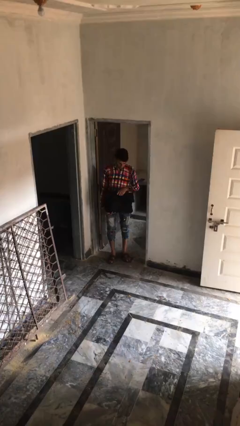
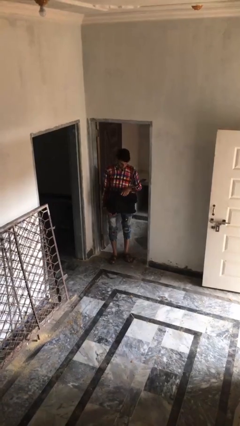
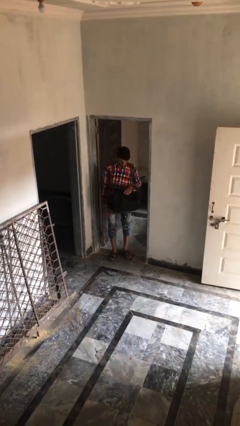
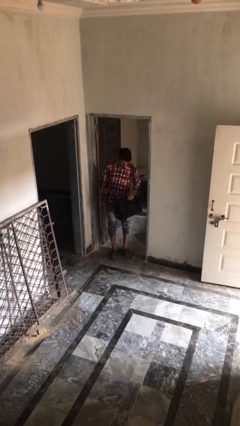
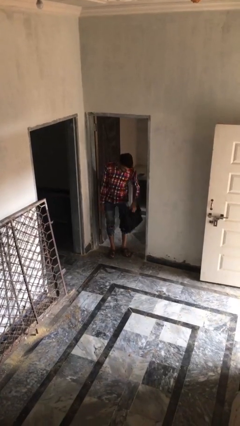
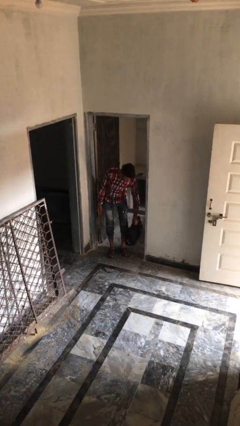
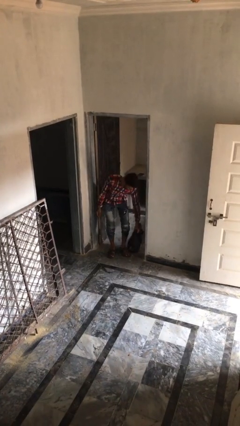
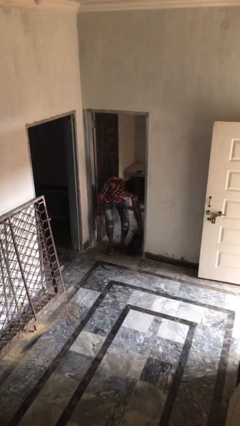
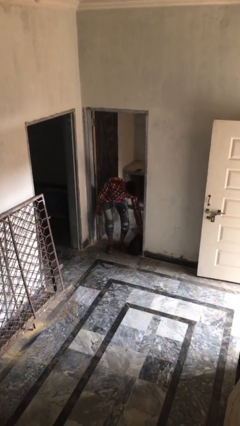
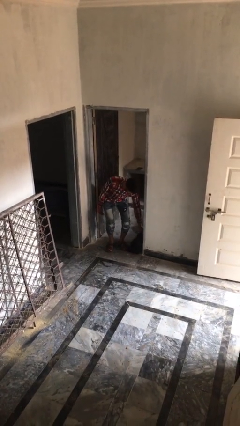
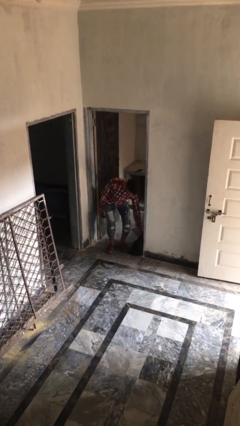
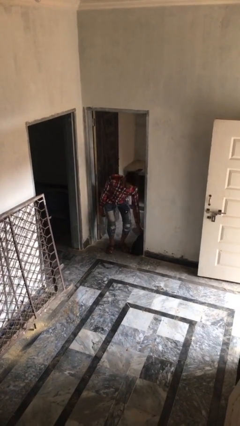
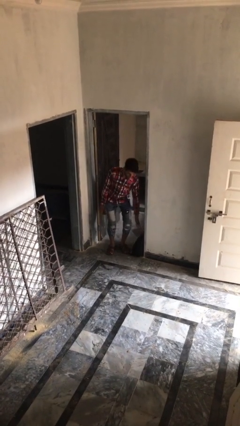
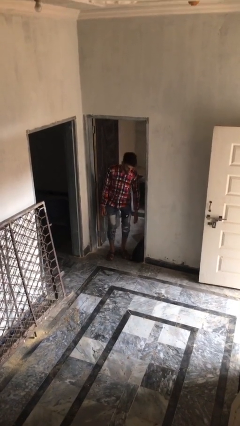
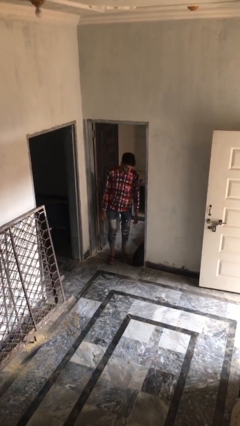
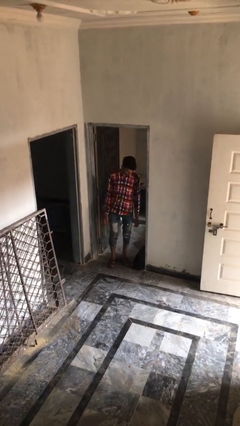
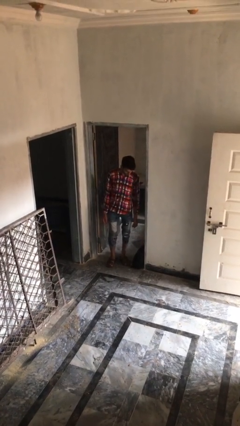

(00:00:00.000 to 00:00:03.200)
person puts down object on floor

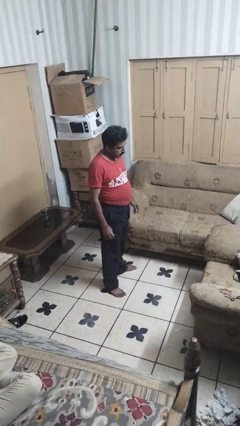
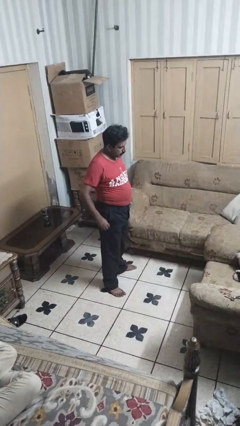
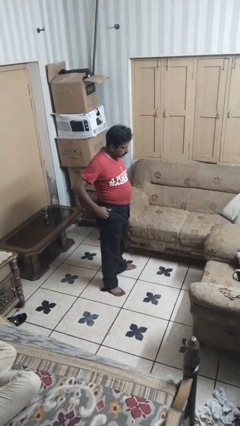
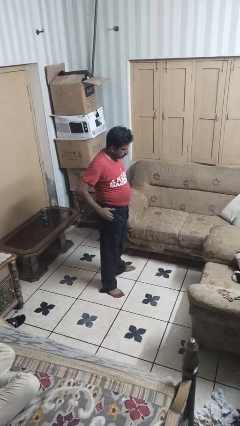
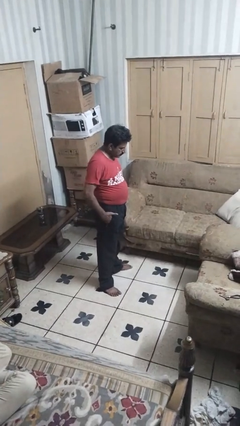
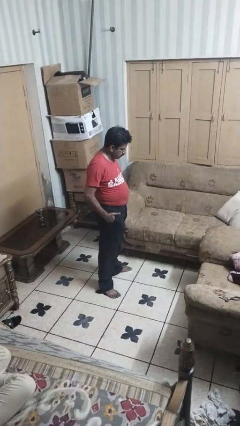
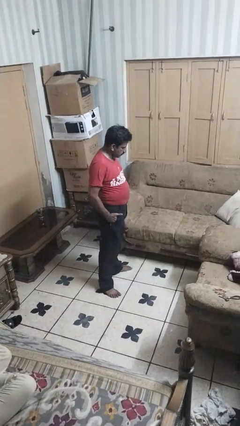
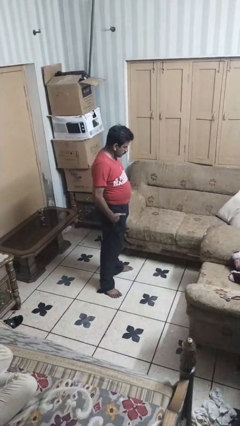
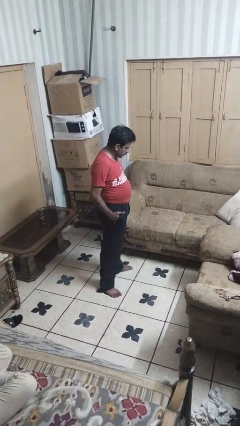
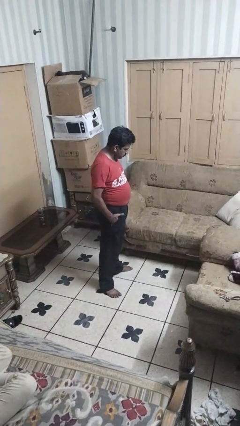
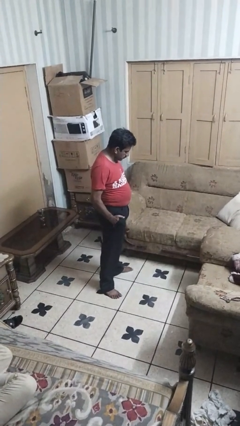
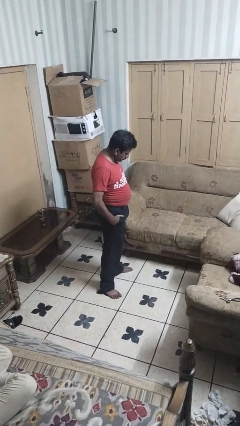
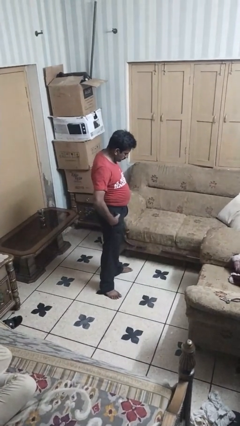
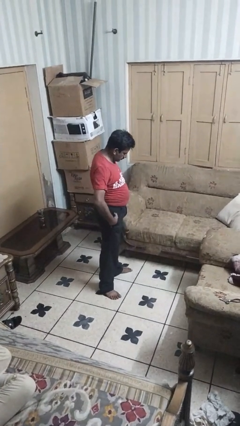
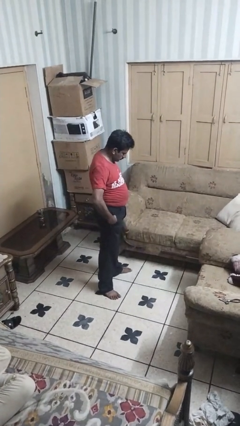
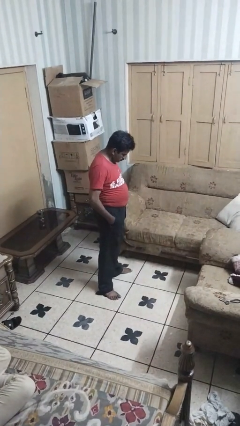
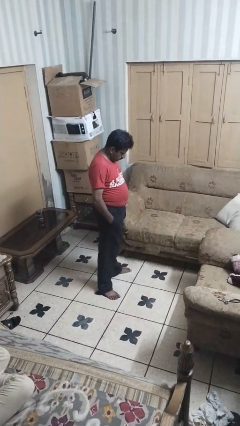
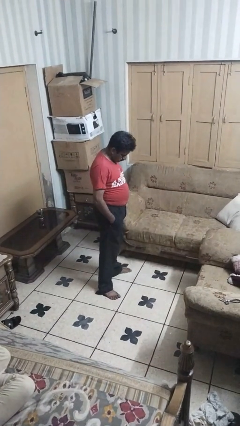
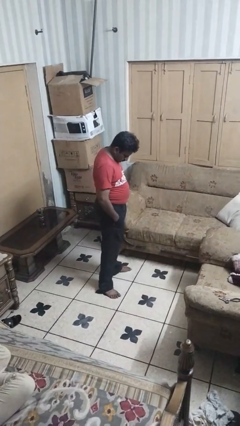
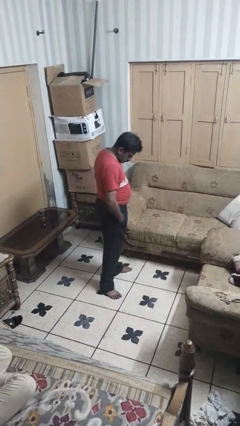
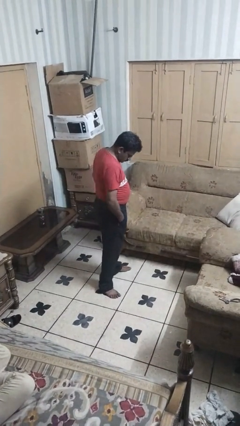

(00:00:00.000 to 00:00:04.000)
person puts hands in back pockets

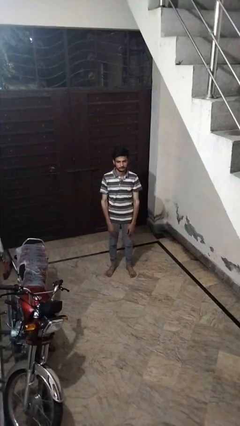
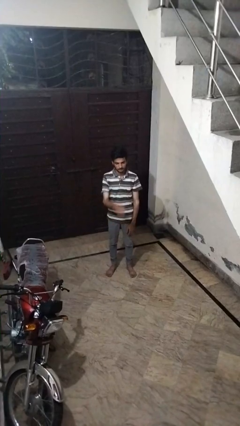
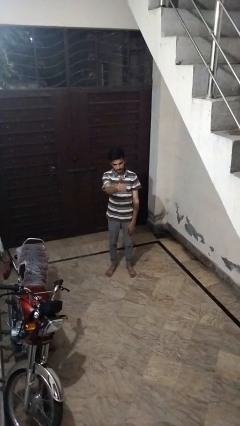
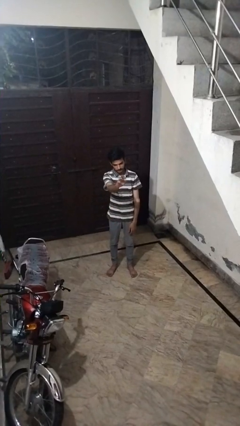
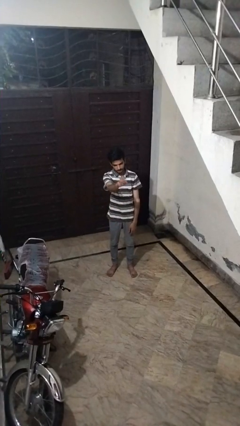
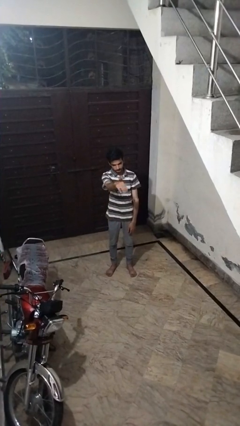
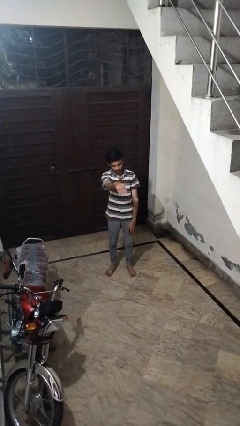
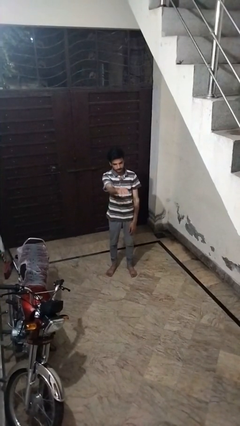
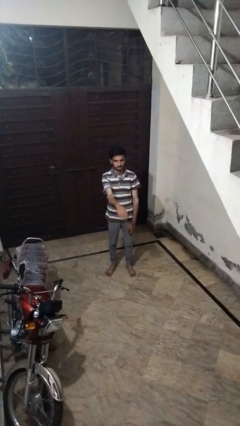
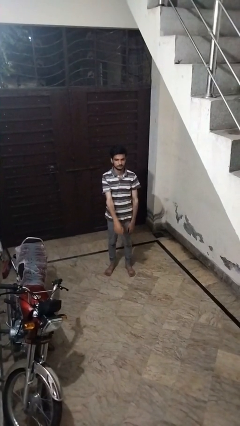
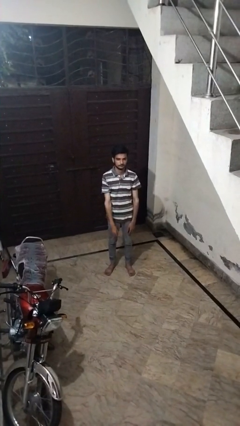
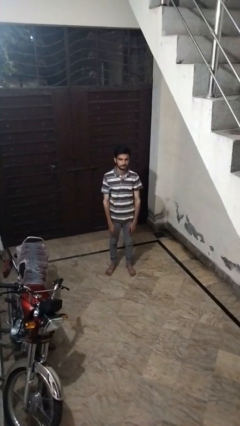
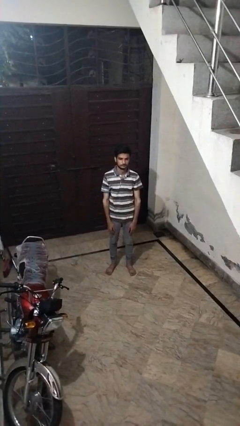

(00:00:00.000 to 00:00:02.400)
person gestures come here

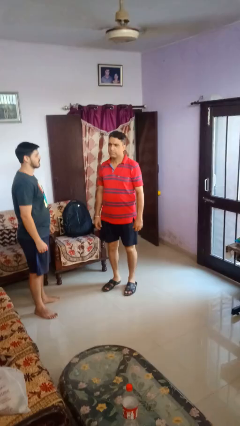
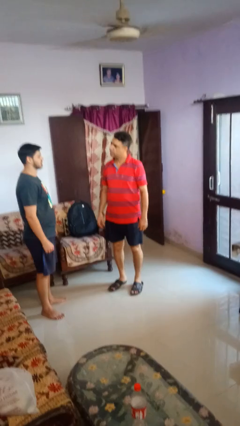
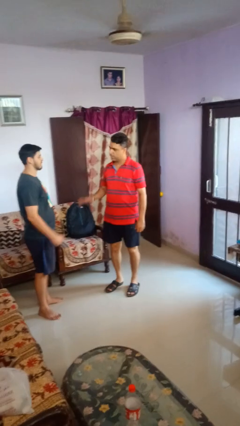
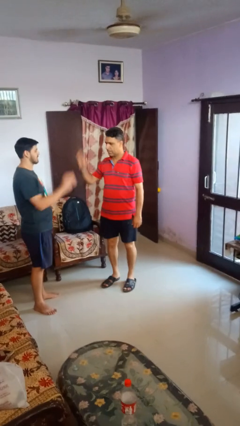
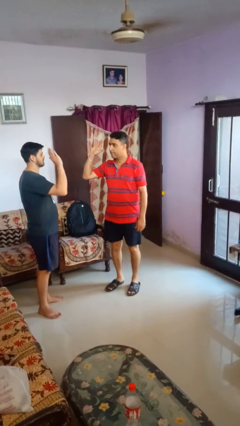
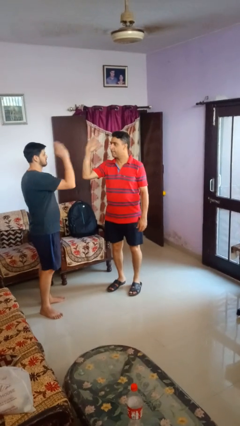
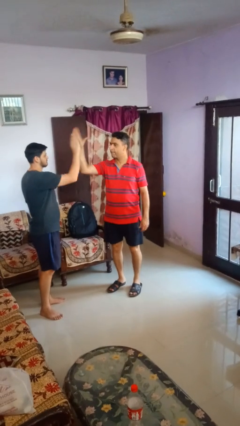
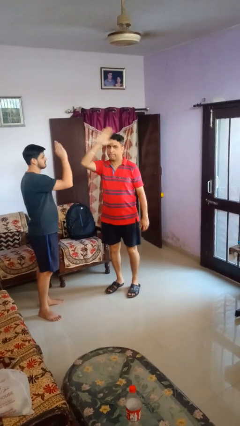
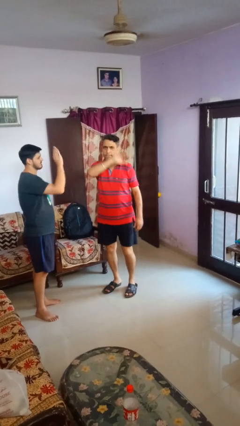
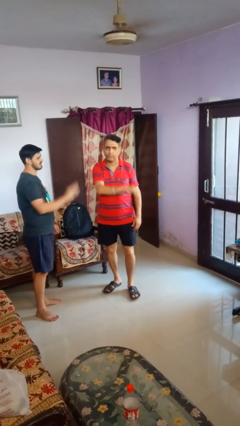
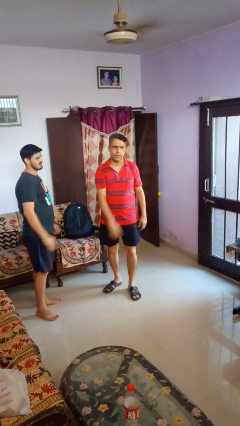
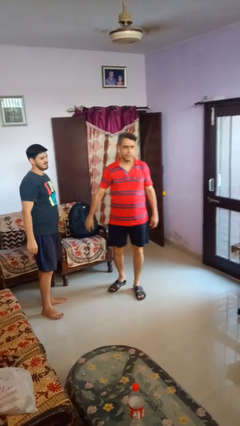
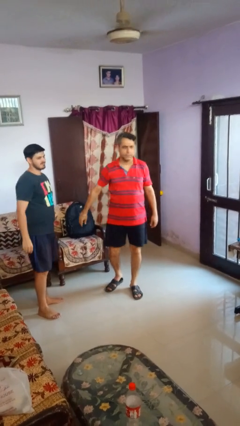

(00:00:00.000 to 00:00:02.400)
person highfives hand

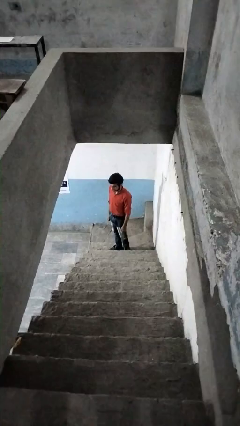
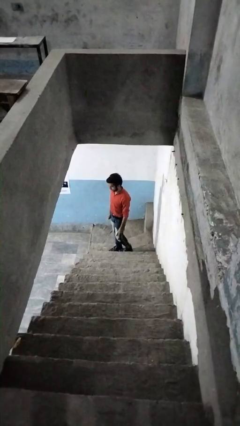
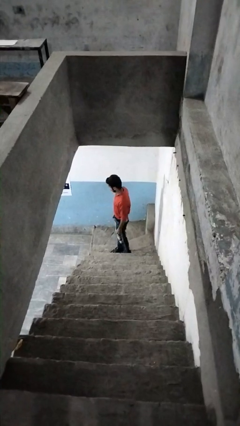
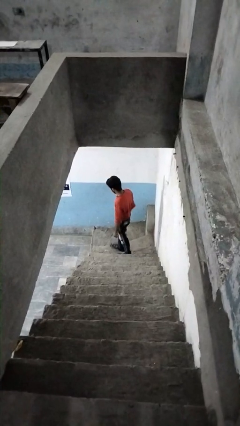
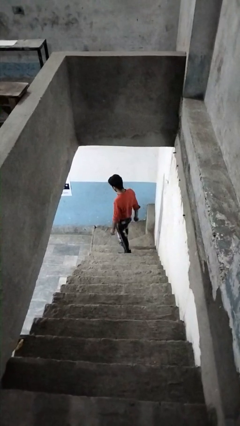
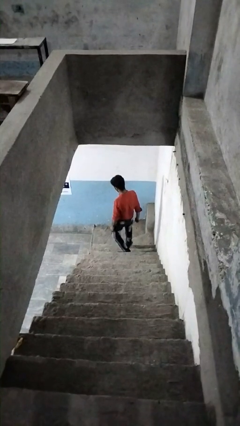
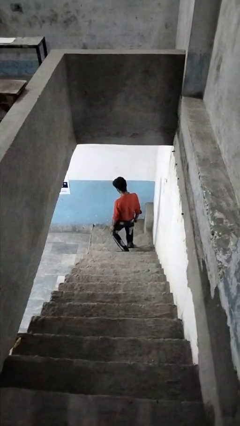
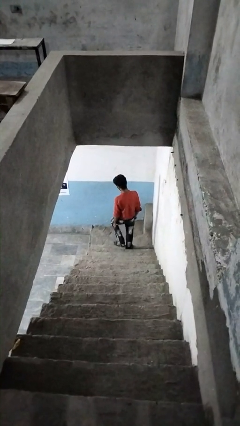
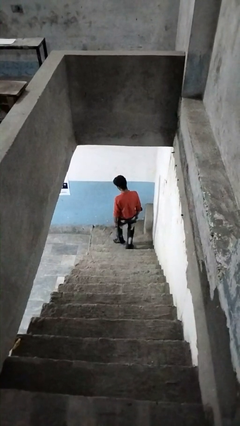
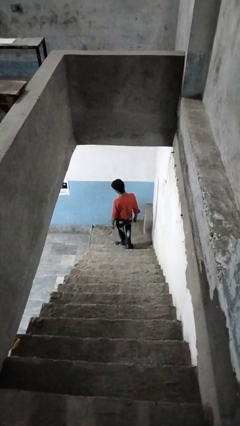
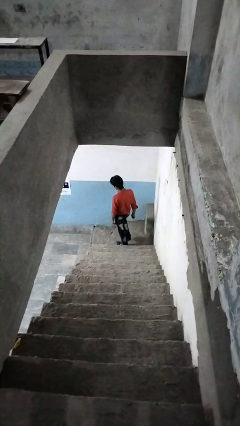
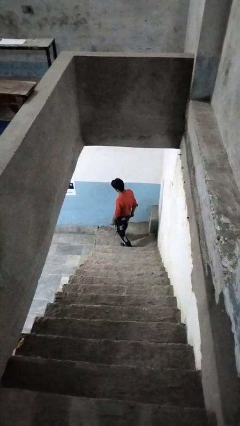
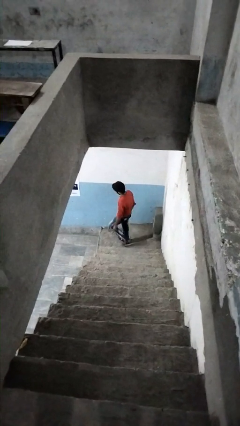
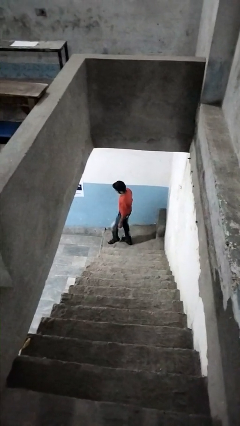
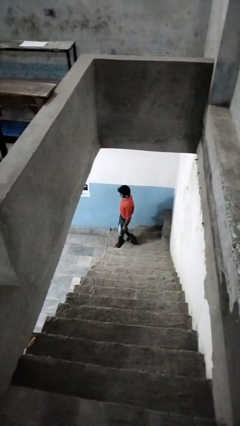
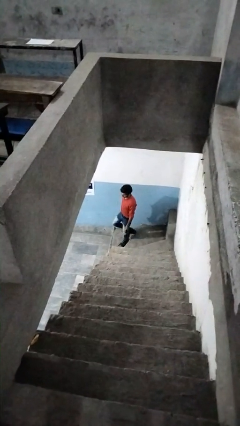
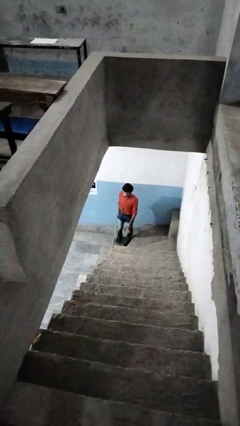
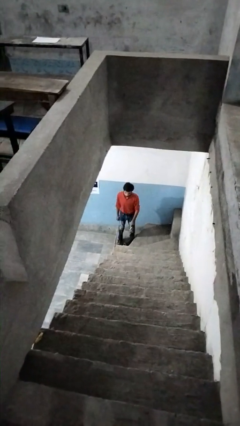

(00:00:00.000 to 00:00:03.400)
person climbs down stairs

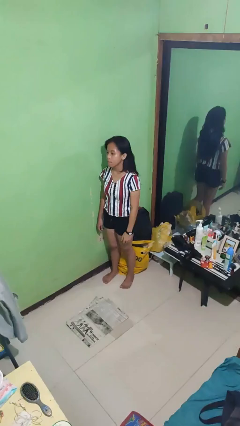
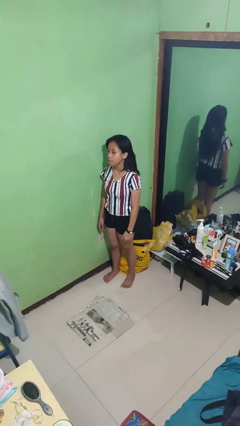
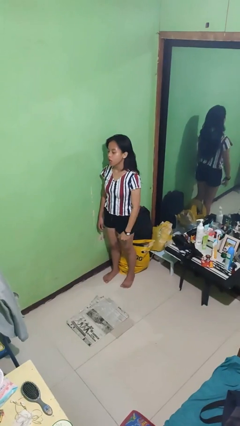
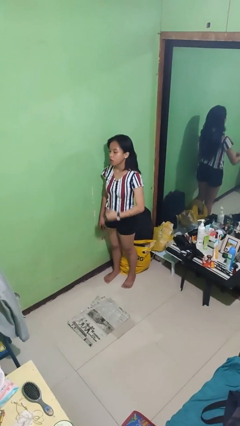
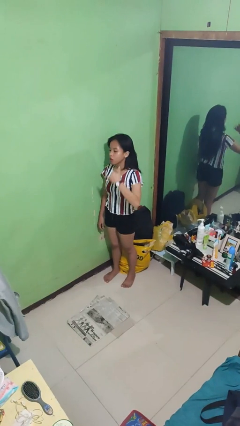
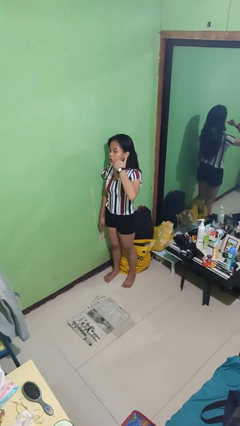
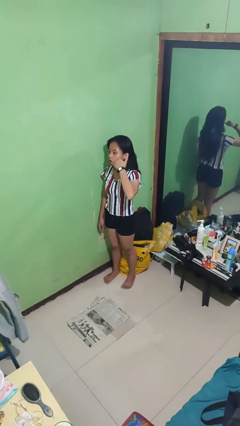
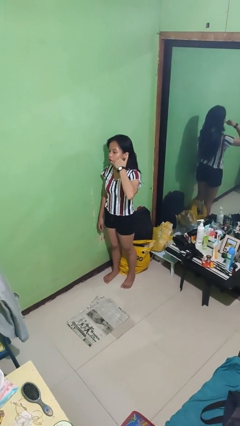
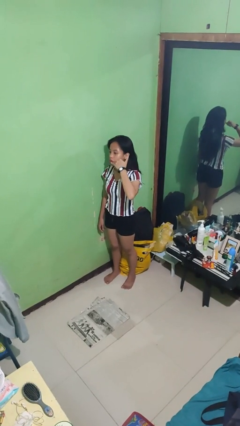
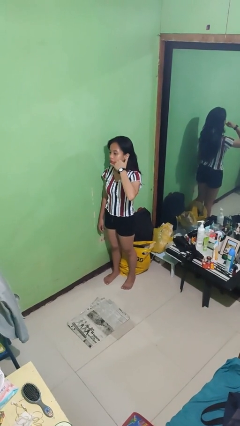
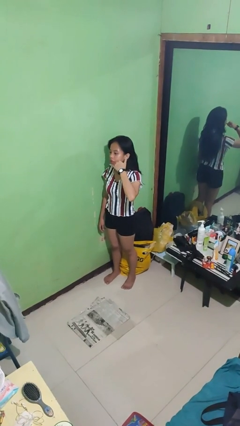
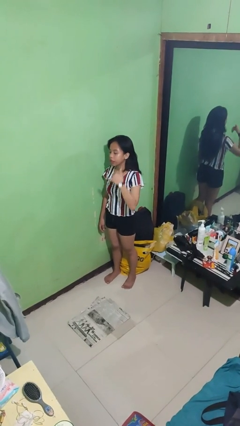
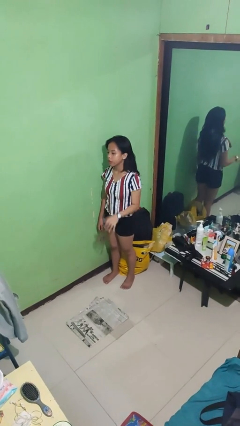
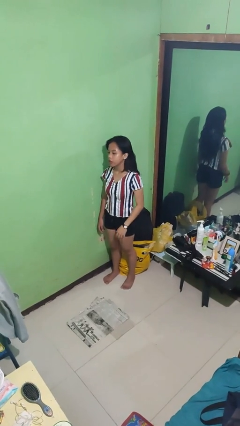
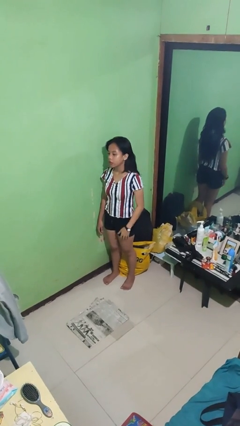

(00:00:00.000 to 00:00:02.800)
person gestures call me
